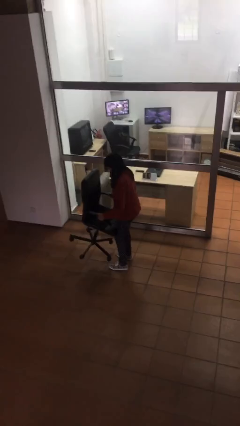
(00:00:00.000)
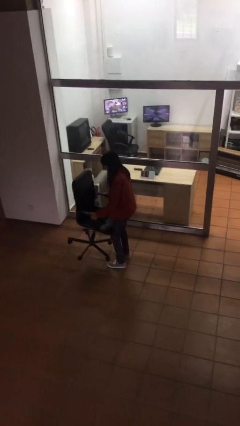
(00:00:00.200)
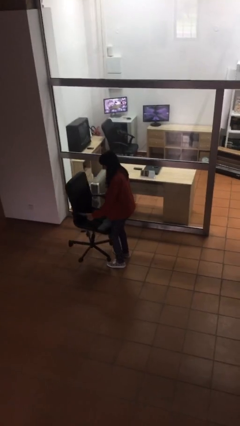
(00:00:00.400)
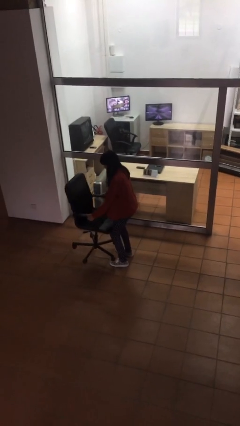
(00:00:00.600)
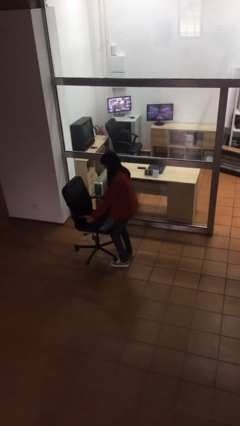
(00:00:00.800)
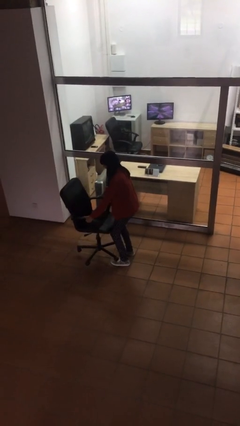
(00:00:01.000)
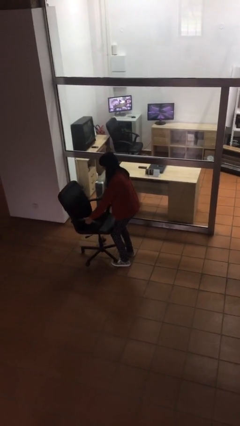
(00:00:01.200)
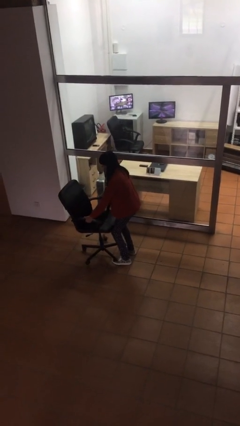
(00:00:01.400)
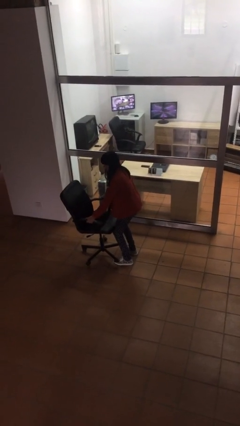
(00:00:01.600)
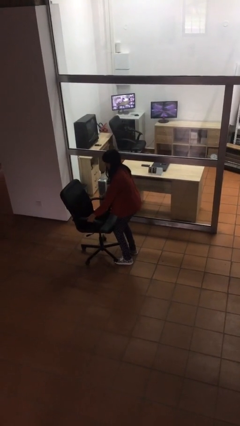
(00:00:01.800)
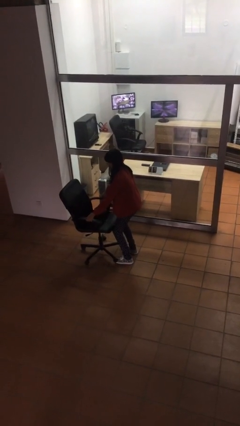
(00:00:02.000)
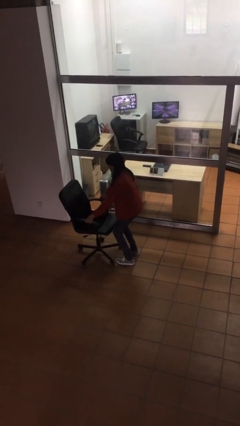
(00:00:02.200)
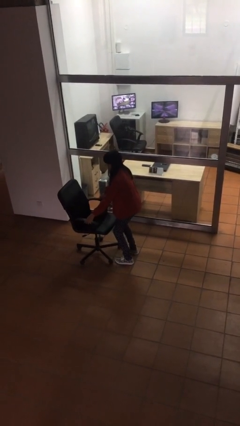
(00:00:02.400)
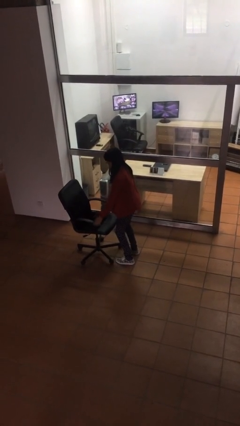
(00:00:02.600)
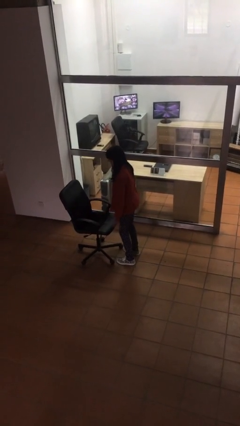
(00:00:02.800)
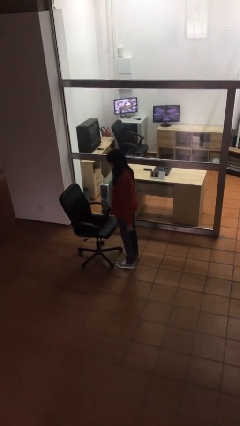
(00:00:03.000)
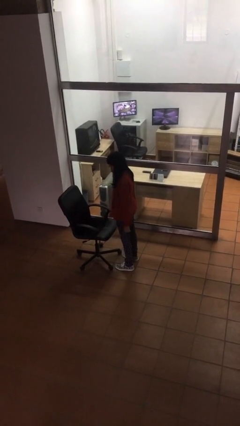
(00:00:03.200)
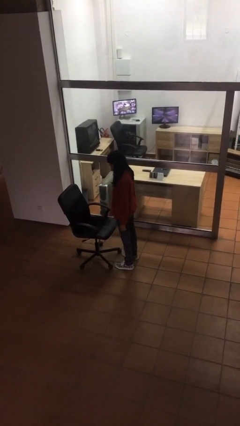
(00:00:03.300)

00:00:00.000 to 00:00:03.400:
person puts down object on floor

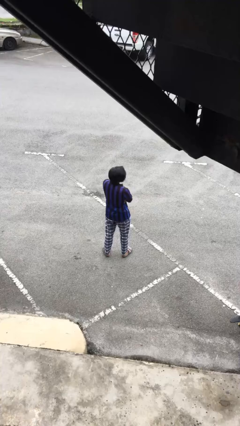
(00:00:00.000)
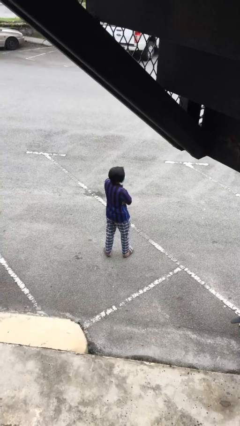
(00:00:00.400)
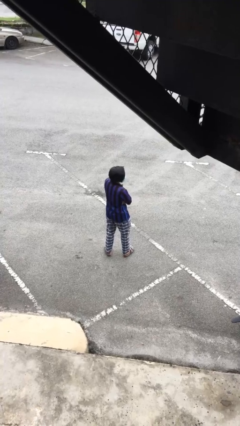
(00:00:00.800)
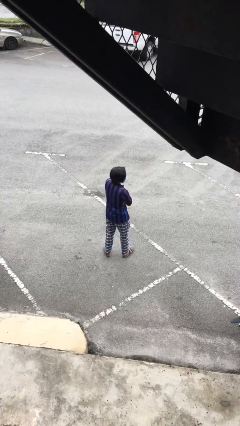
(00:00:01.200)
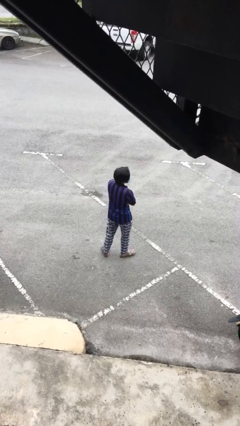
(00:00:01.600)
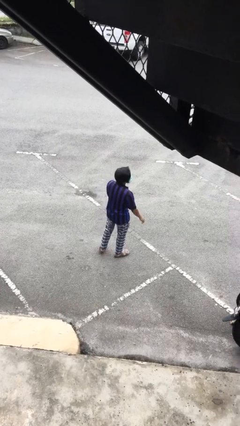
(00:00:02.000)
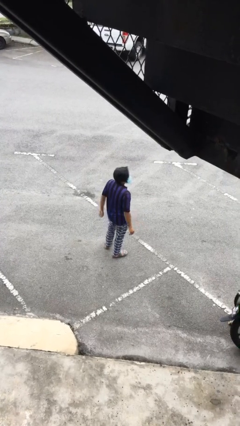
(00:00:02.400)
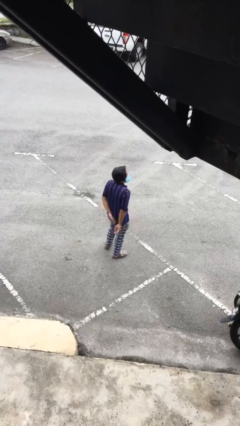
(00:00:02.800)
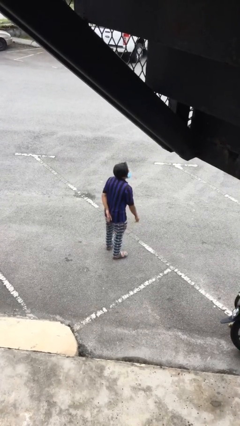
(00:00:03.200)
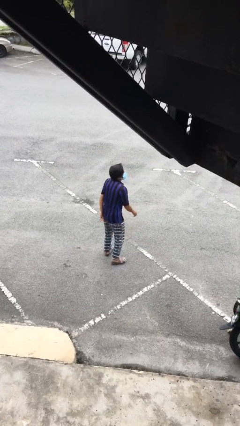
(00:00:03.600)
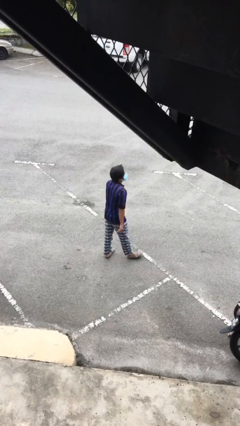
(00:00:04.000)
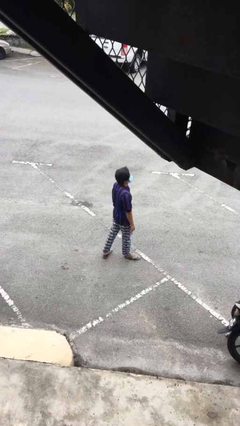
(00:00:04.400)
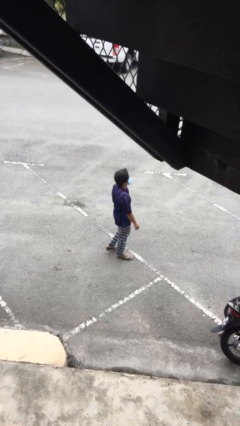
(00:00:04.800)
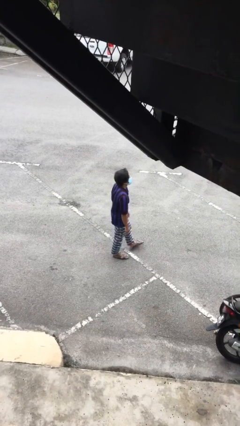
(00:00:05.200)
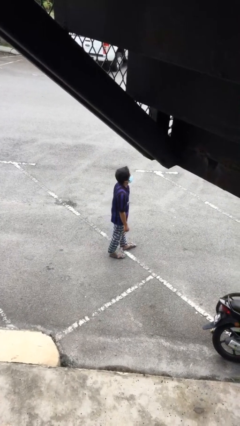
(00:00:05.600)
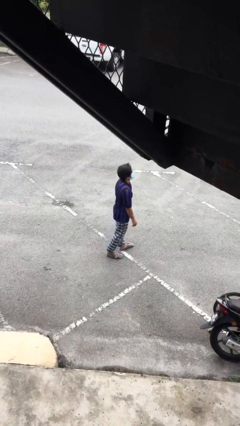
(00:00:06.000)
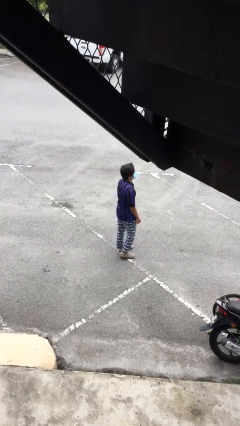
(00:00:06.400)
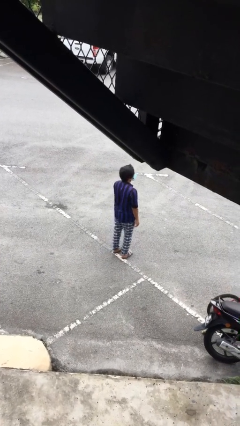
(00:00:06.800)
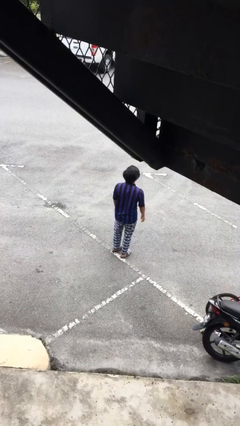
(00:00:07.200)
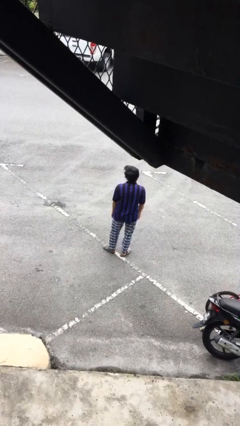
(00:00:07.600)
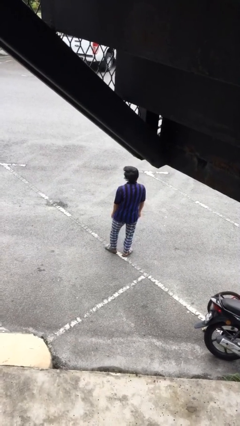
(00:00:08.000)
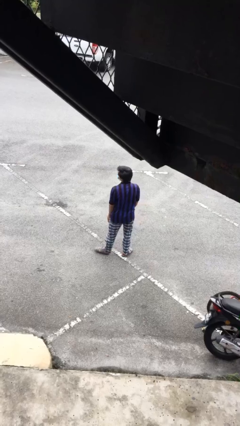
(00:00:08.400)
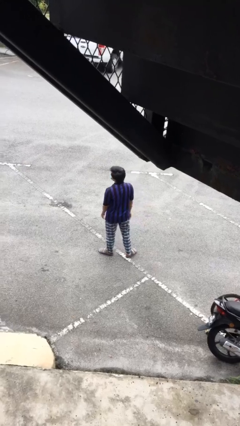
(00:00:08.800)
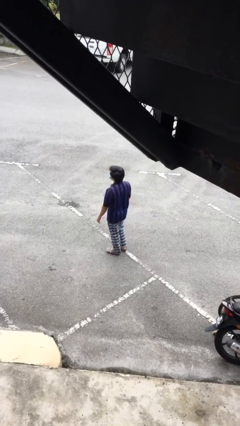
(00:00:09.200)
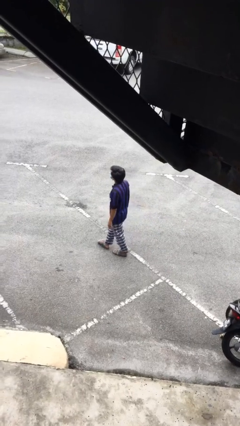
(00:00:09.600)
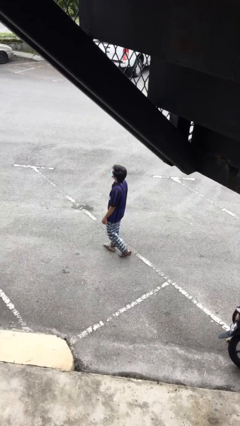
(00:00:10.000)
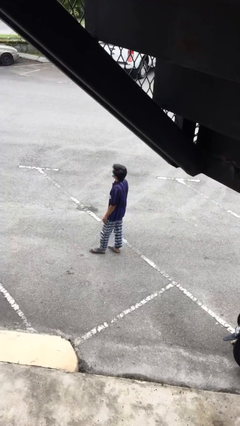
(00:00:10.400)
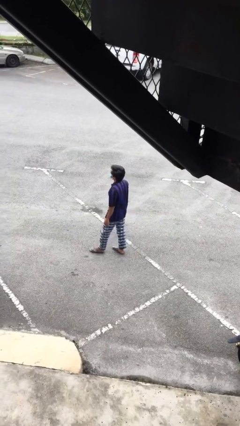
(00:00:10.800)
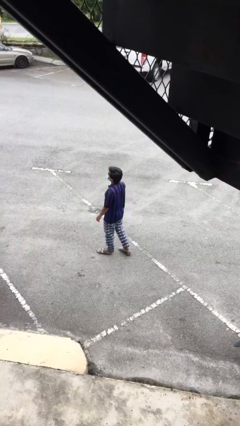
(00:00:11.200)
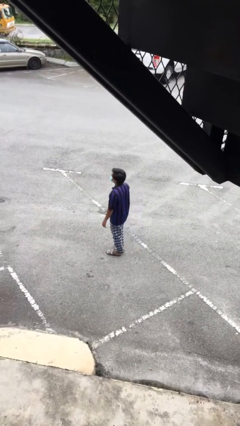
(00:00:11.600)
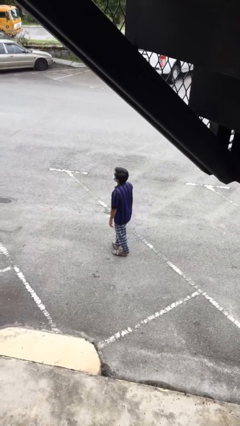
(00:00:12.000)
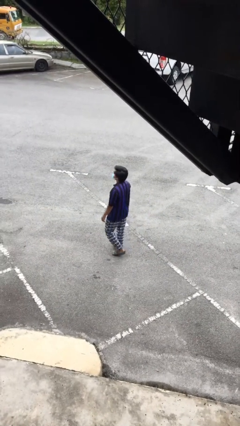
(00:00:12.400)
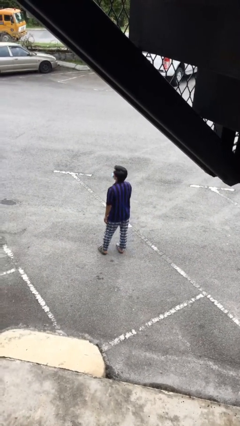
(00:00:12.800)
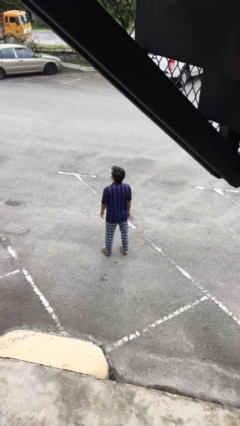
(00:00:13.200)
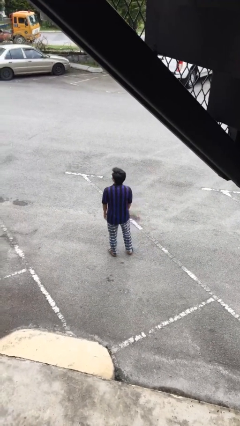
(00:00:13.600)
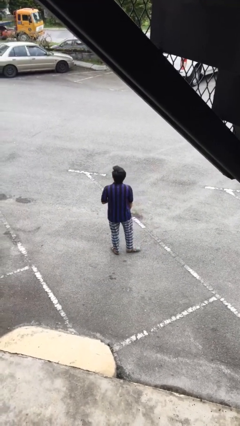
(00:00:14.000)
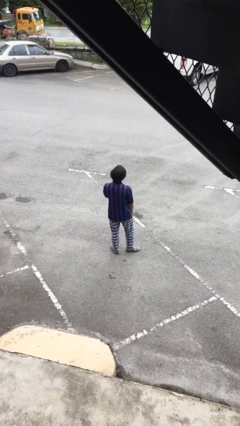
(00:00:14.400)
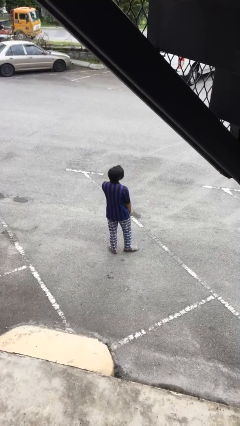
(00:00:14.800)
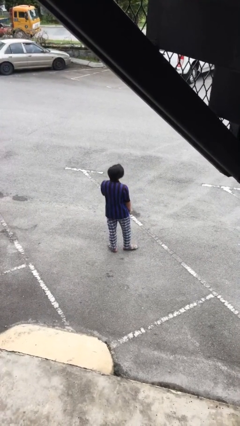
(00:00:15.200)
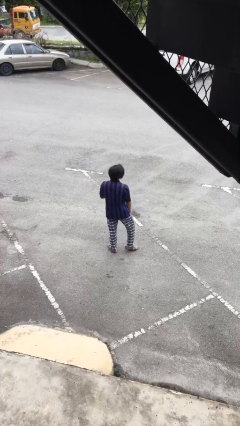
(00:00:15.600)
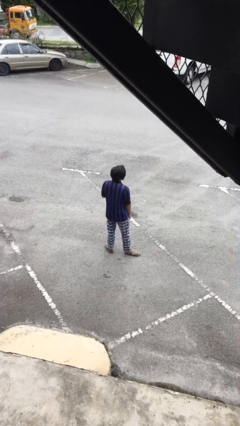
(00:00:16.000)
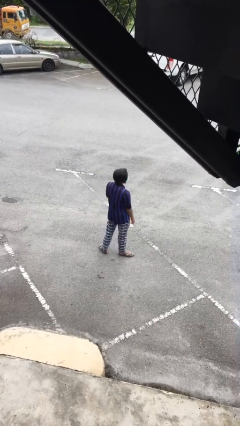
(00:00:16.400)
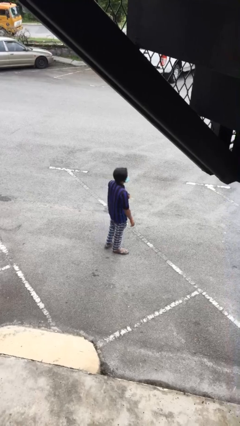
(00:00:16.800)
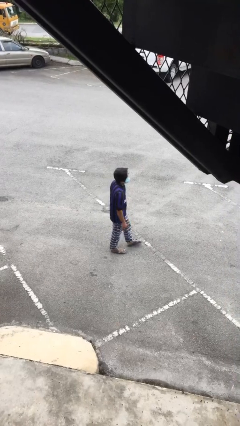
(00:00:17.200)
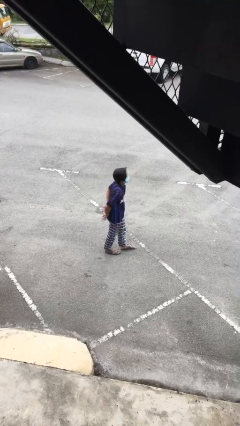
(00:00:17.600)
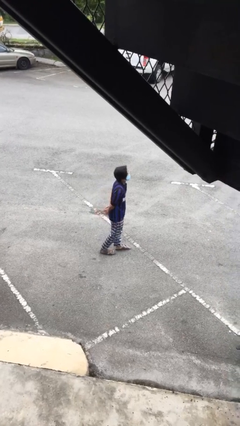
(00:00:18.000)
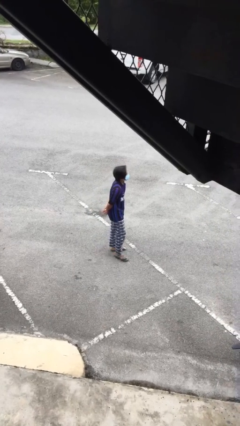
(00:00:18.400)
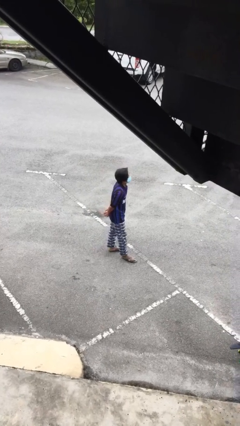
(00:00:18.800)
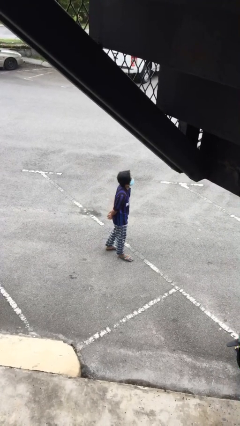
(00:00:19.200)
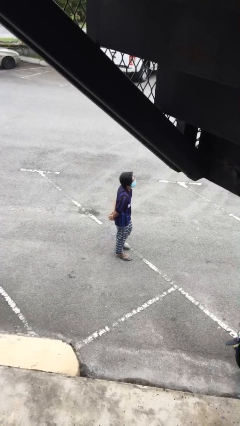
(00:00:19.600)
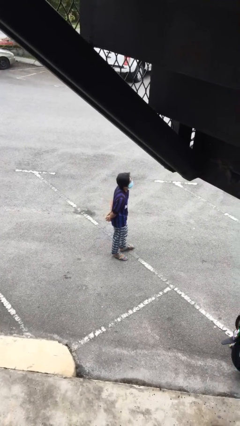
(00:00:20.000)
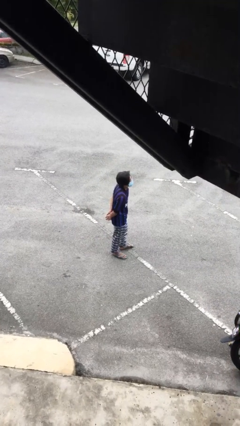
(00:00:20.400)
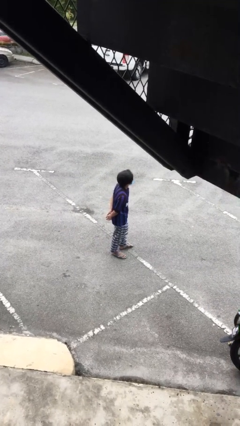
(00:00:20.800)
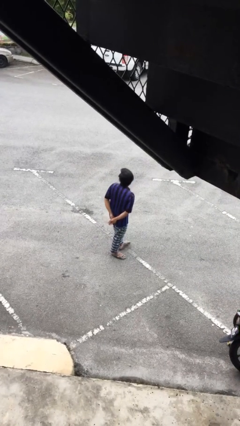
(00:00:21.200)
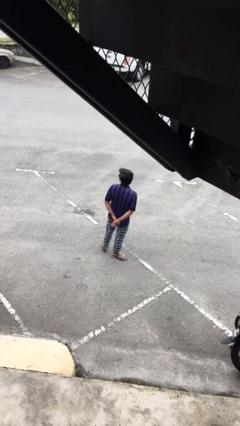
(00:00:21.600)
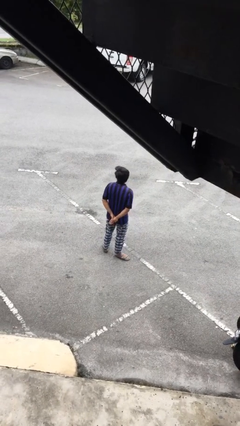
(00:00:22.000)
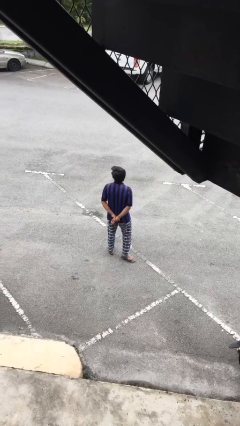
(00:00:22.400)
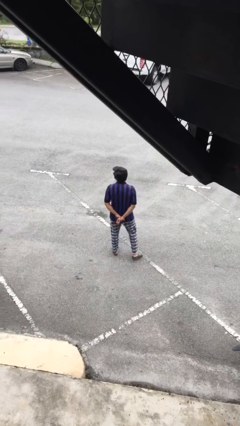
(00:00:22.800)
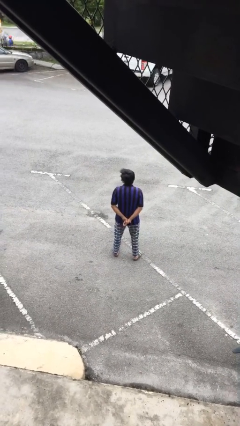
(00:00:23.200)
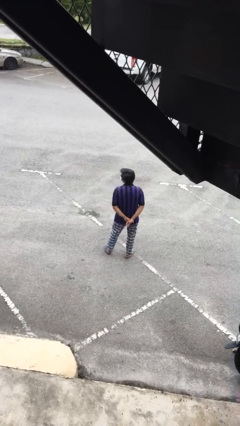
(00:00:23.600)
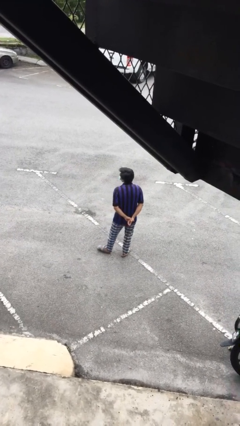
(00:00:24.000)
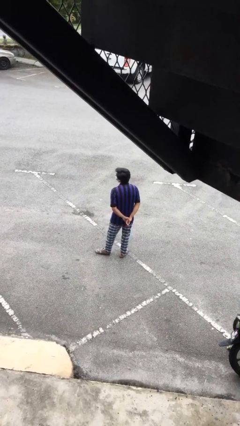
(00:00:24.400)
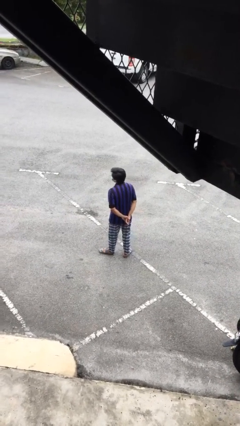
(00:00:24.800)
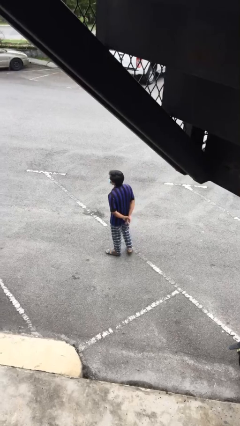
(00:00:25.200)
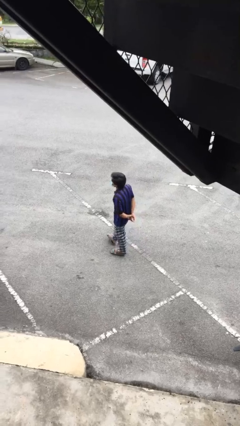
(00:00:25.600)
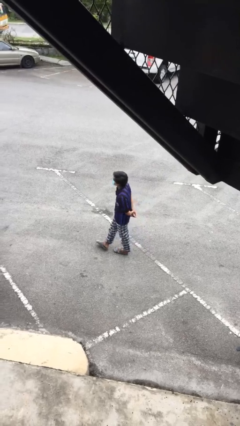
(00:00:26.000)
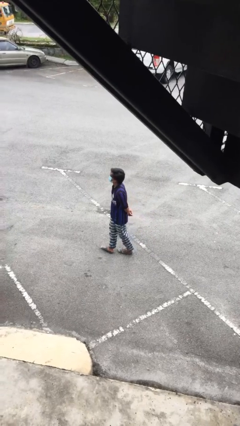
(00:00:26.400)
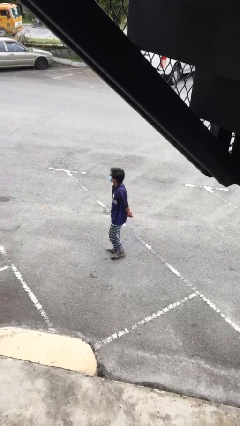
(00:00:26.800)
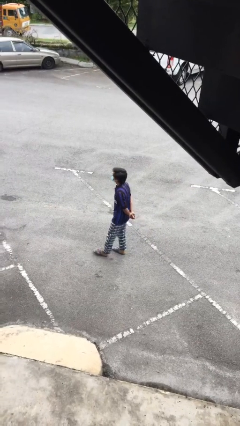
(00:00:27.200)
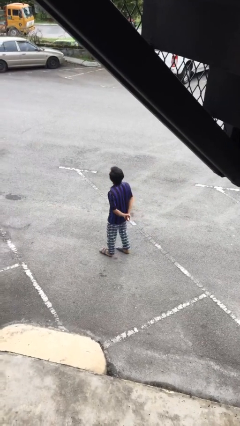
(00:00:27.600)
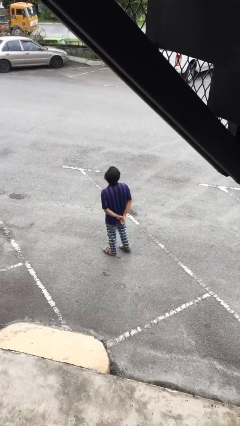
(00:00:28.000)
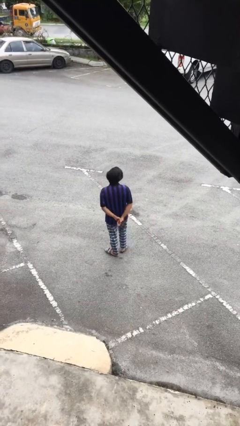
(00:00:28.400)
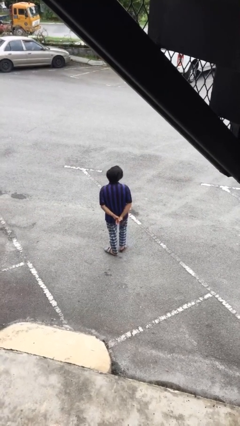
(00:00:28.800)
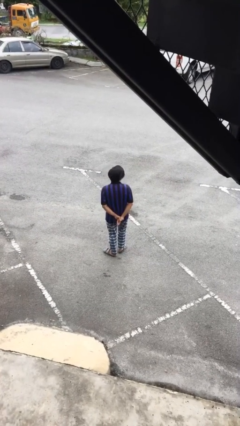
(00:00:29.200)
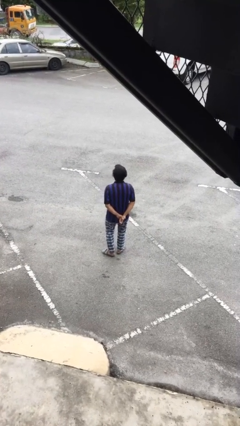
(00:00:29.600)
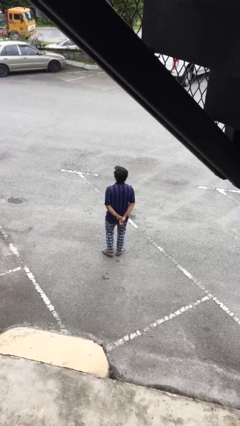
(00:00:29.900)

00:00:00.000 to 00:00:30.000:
person walks
